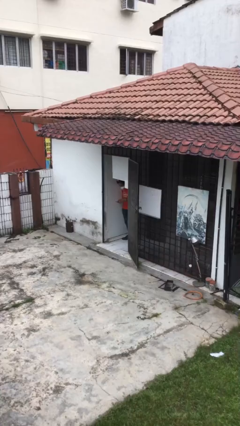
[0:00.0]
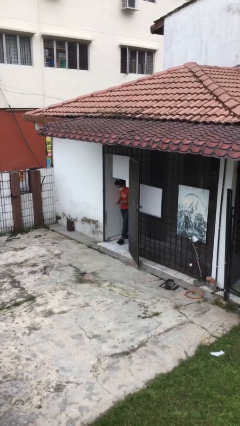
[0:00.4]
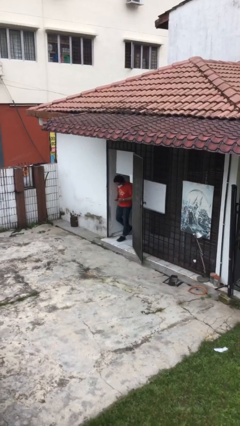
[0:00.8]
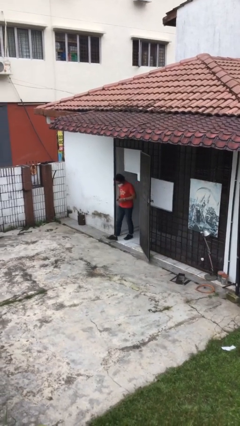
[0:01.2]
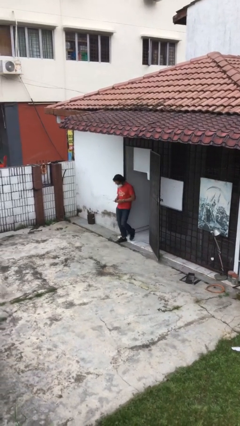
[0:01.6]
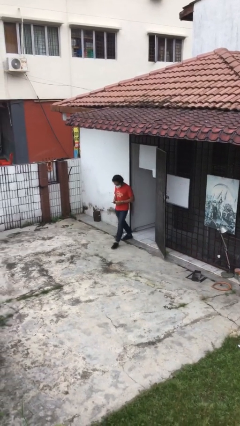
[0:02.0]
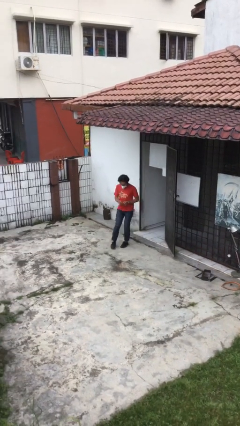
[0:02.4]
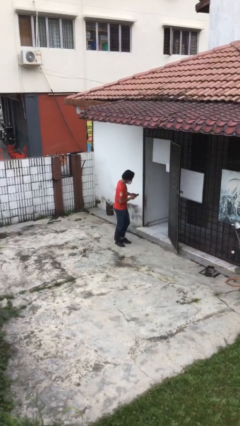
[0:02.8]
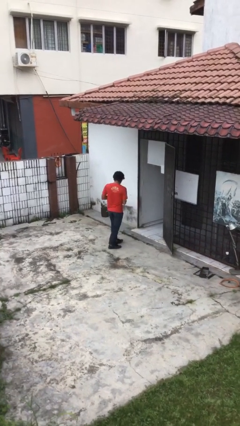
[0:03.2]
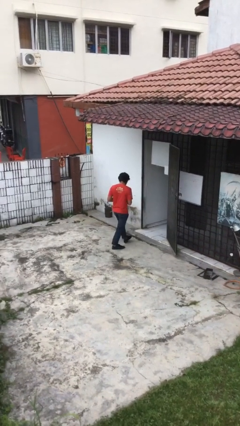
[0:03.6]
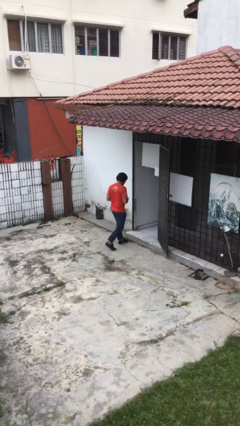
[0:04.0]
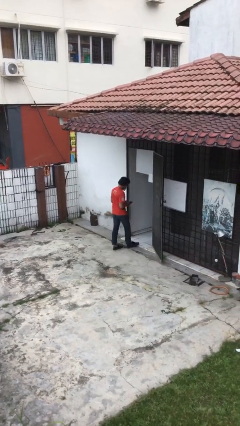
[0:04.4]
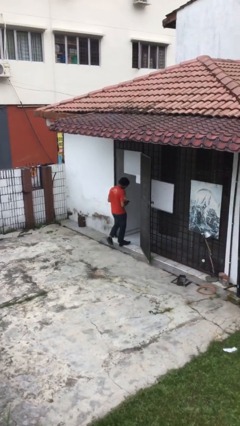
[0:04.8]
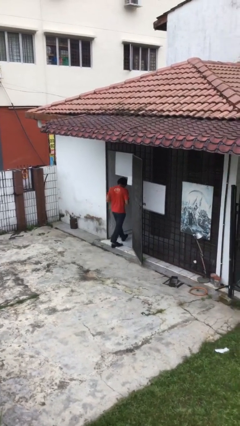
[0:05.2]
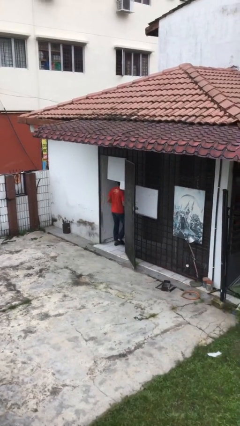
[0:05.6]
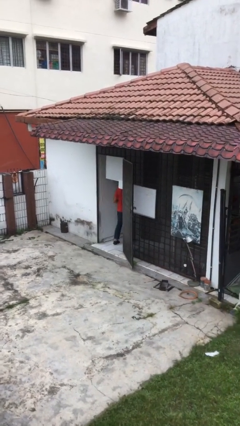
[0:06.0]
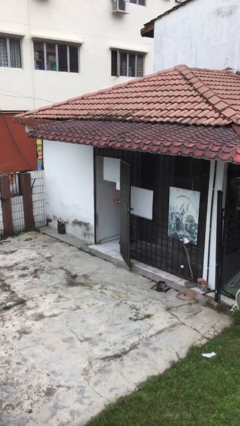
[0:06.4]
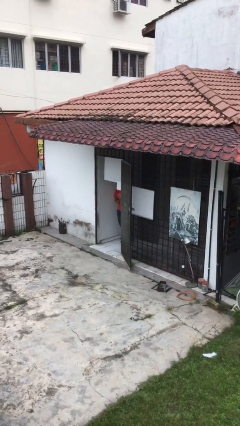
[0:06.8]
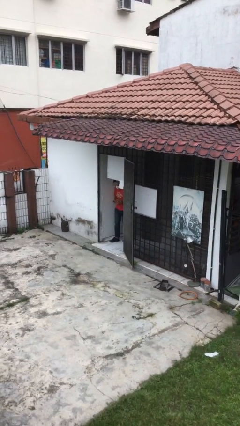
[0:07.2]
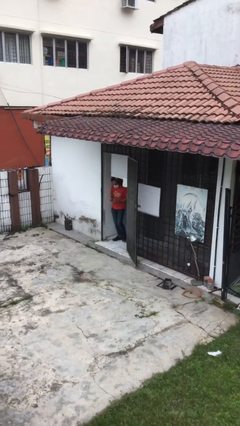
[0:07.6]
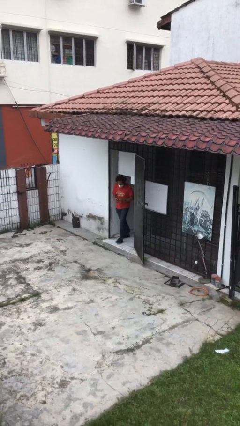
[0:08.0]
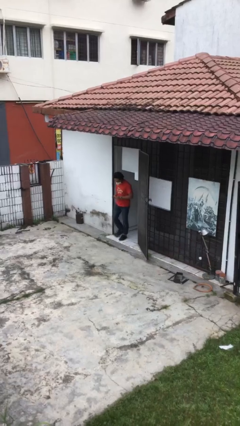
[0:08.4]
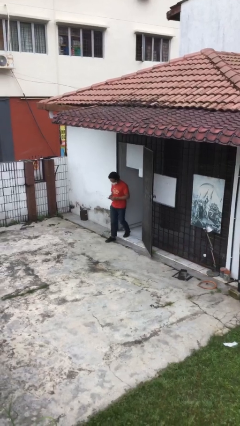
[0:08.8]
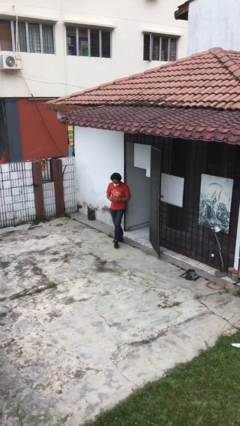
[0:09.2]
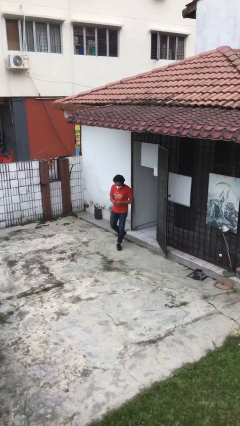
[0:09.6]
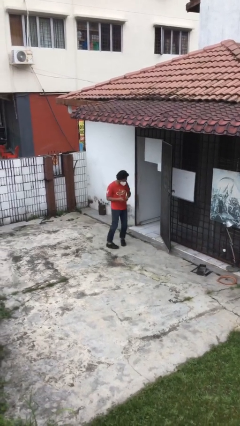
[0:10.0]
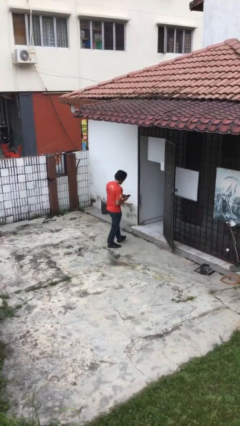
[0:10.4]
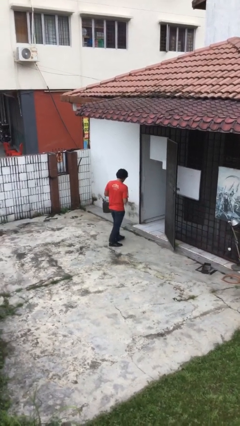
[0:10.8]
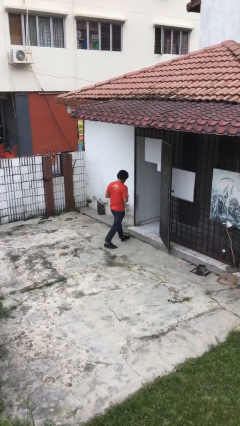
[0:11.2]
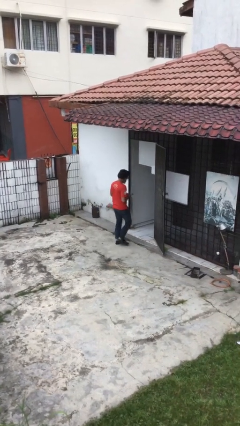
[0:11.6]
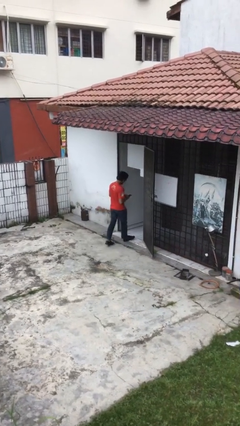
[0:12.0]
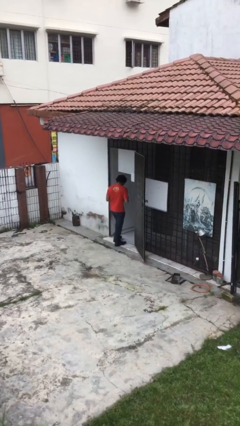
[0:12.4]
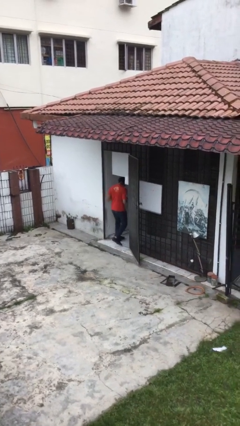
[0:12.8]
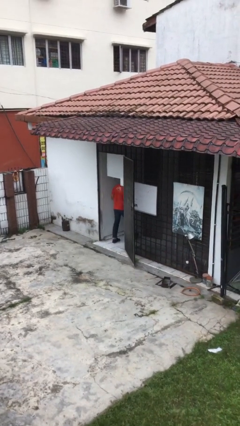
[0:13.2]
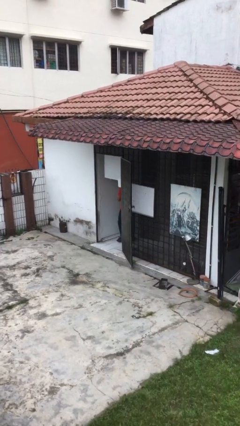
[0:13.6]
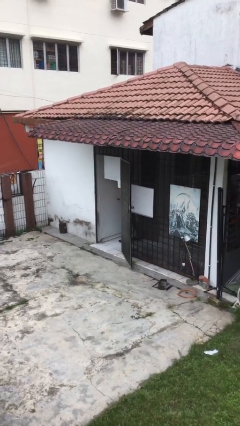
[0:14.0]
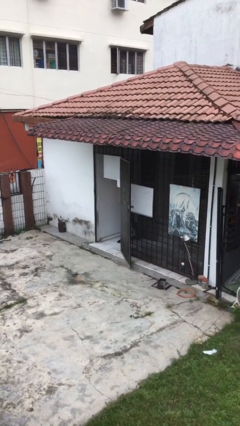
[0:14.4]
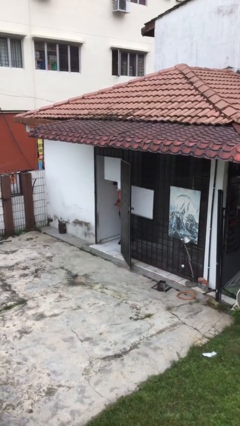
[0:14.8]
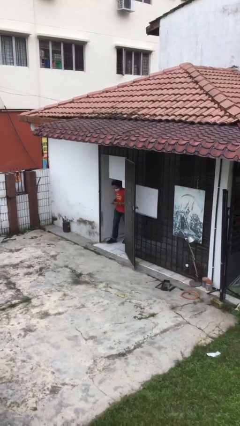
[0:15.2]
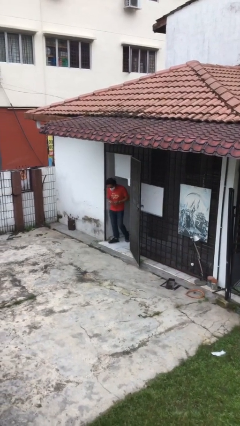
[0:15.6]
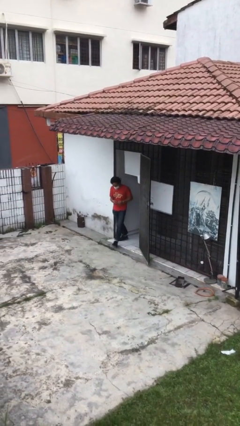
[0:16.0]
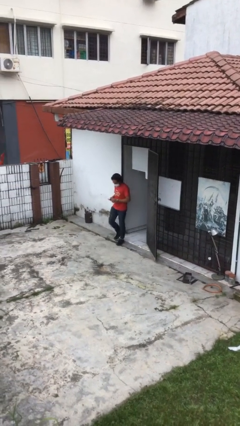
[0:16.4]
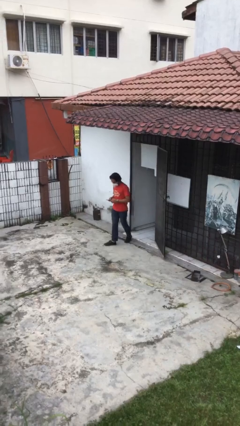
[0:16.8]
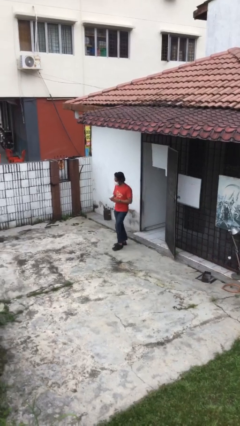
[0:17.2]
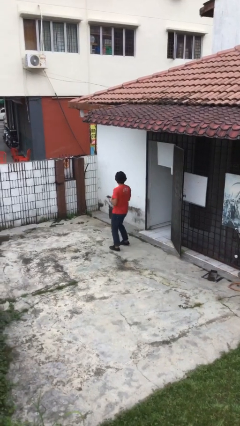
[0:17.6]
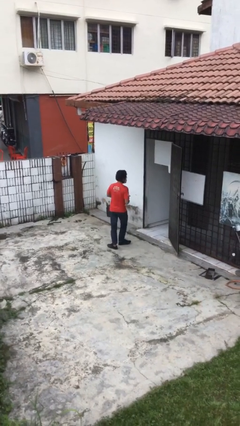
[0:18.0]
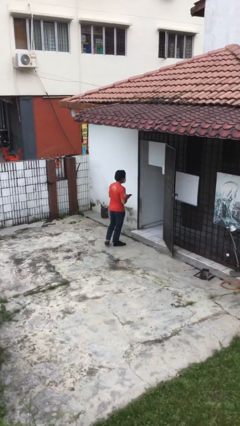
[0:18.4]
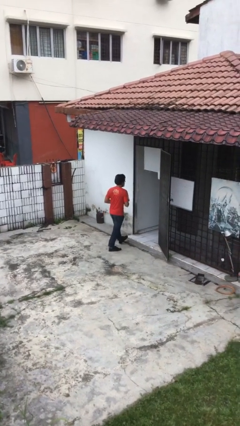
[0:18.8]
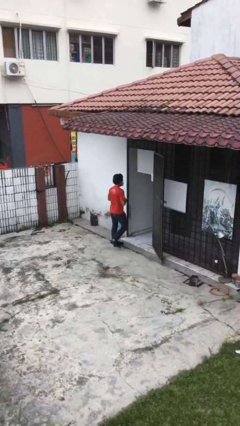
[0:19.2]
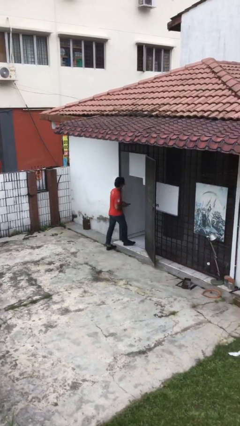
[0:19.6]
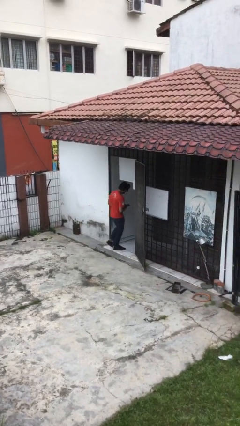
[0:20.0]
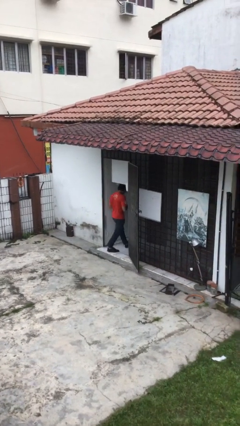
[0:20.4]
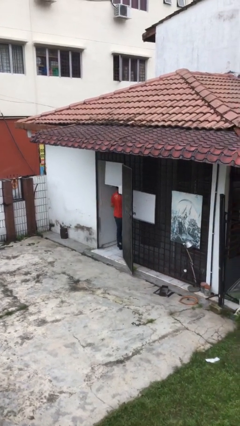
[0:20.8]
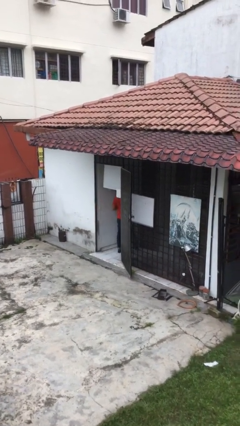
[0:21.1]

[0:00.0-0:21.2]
person texts on phone

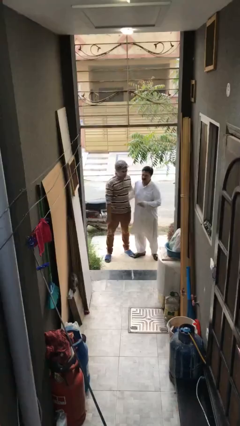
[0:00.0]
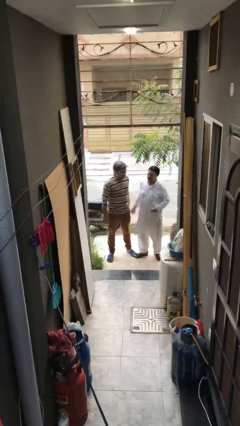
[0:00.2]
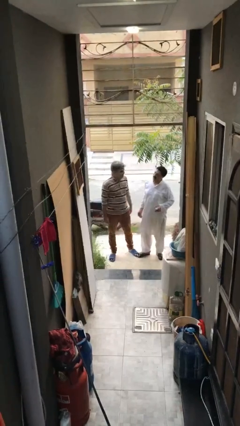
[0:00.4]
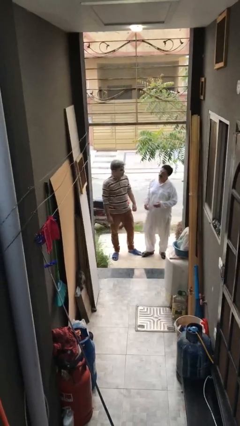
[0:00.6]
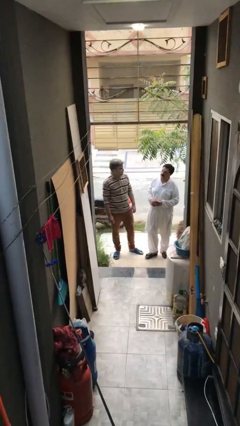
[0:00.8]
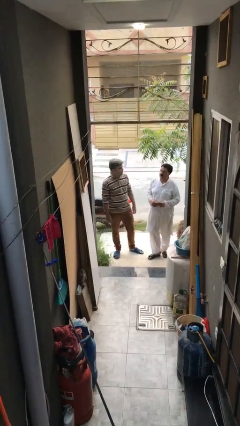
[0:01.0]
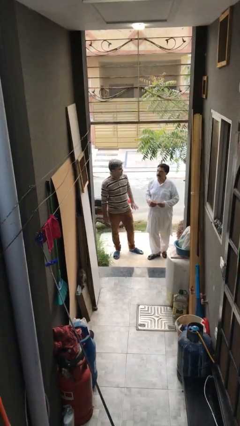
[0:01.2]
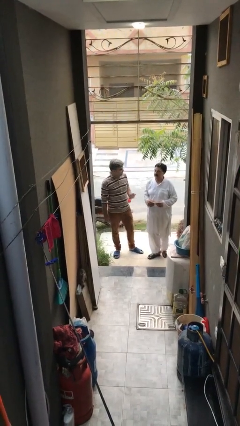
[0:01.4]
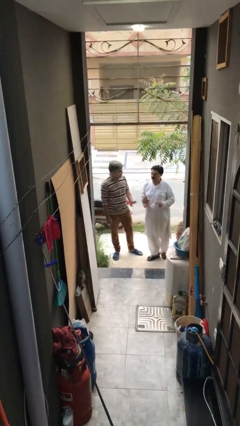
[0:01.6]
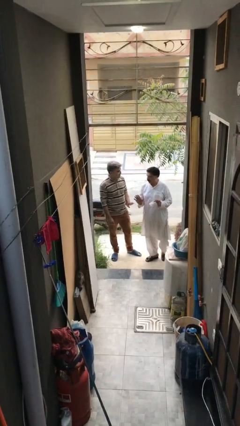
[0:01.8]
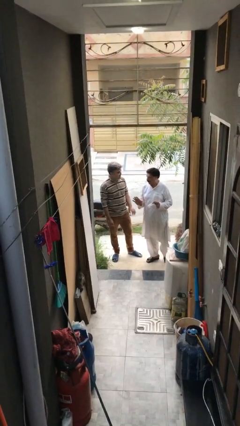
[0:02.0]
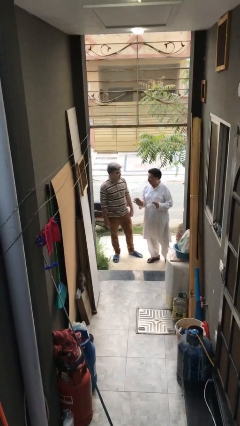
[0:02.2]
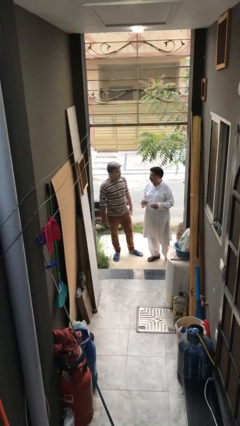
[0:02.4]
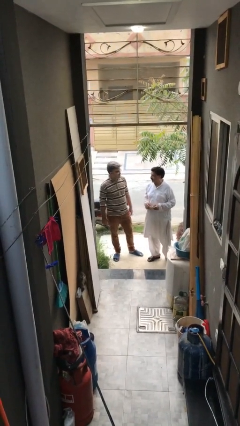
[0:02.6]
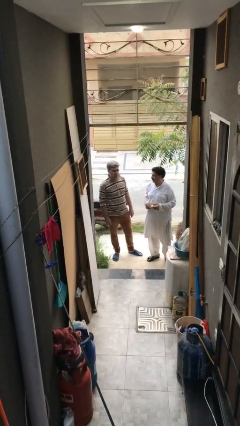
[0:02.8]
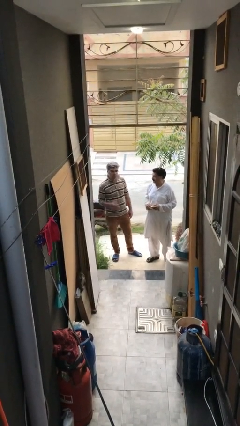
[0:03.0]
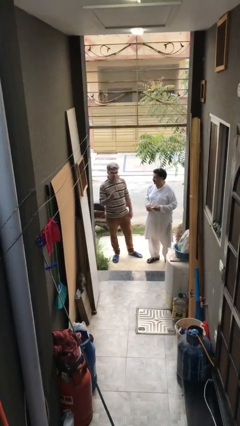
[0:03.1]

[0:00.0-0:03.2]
person talks to person

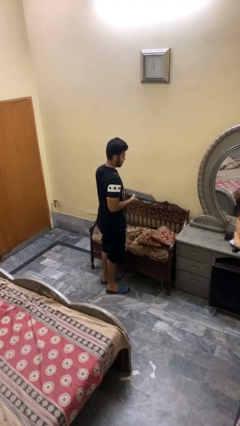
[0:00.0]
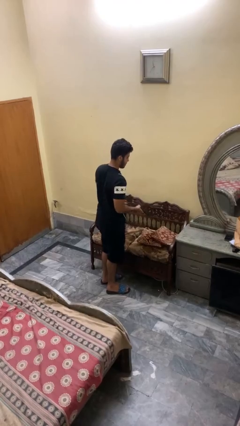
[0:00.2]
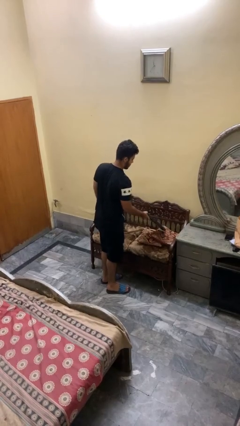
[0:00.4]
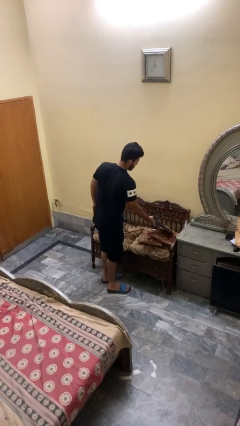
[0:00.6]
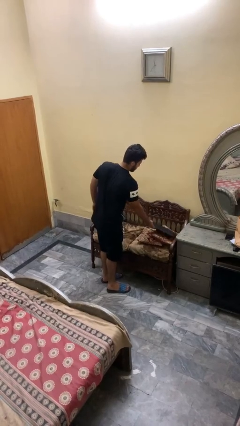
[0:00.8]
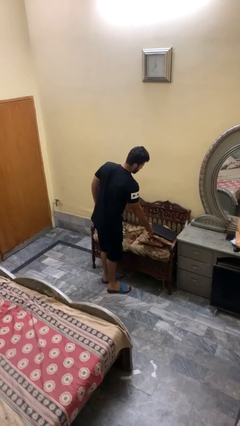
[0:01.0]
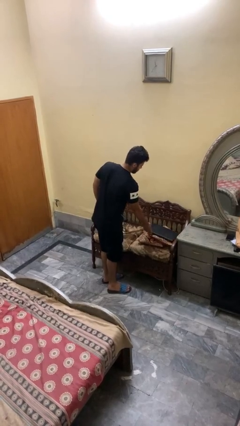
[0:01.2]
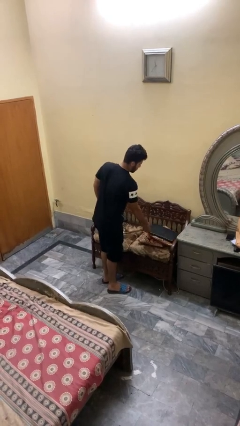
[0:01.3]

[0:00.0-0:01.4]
person puts down object on couch

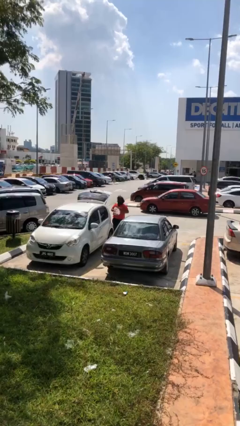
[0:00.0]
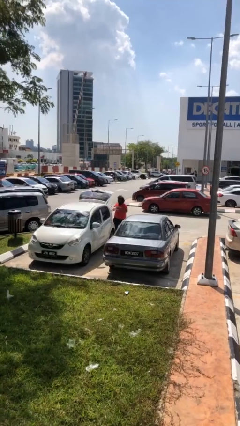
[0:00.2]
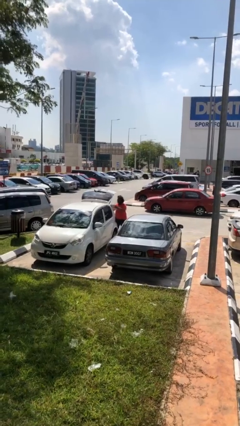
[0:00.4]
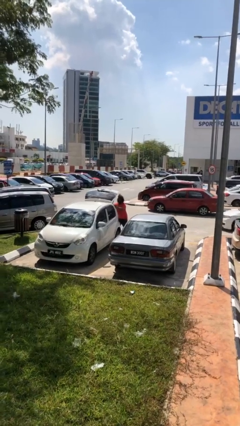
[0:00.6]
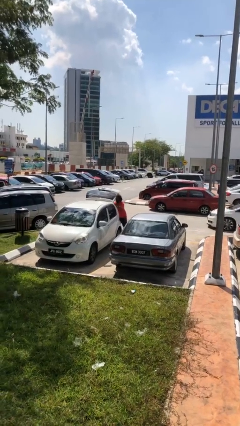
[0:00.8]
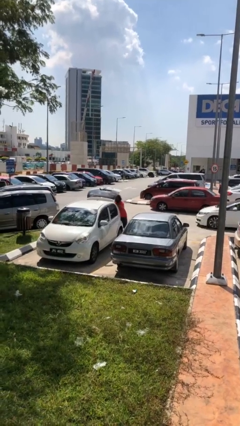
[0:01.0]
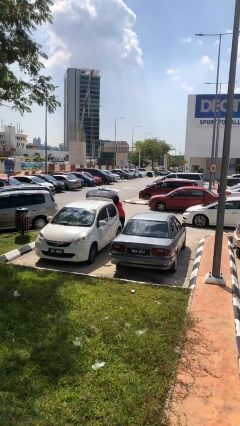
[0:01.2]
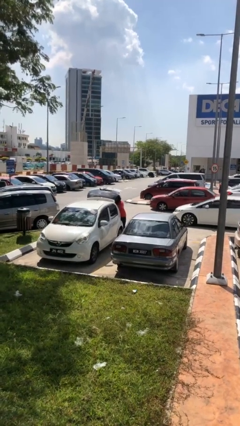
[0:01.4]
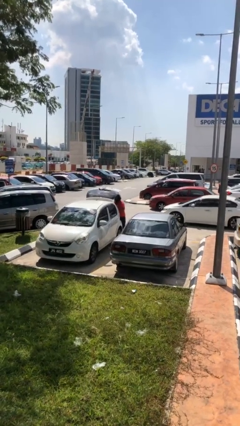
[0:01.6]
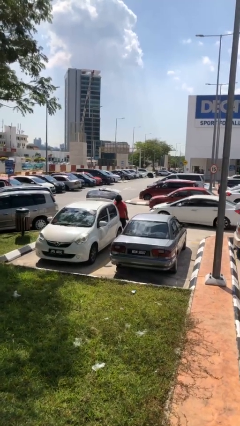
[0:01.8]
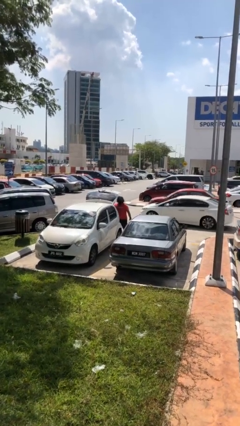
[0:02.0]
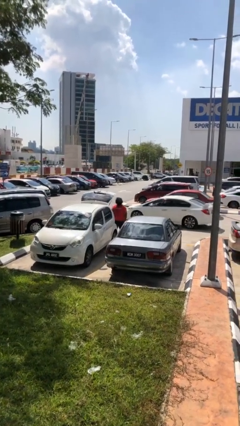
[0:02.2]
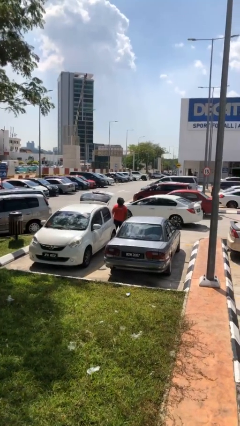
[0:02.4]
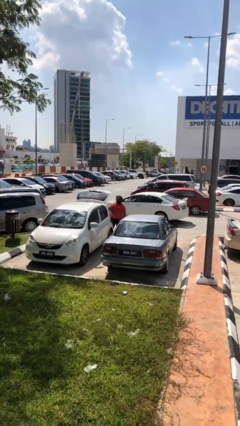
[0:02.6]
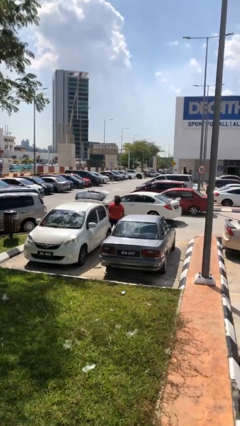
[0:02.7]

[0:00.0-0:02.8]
person loads car
